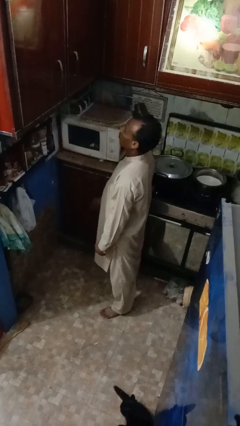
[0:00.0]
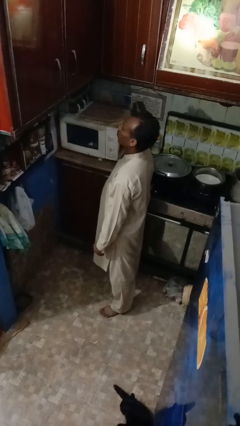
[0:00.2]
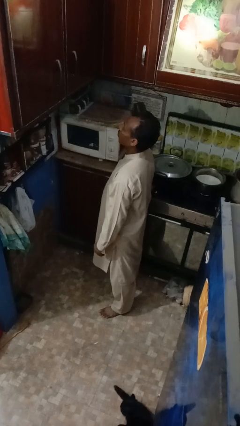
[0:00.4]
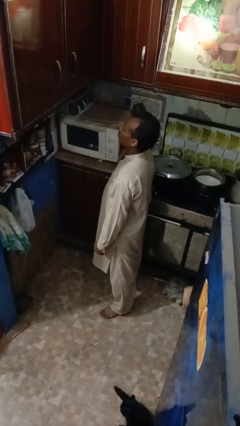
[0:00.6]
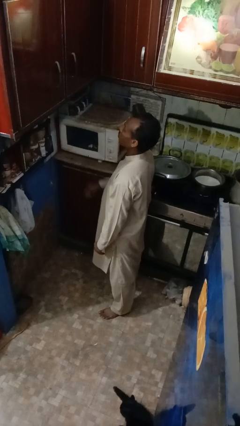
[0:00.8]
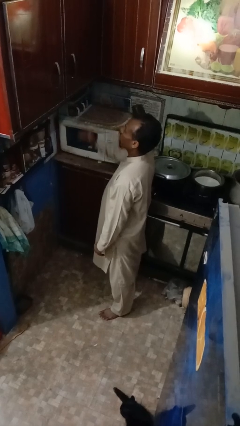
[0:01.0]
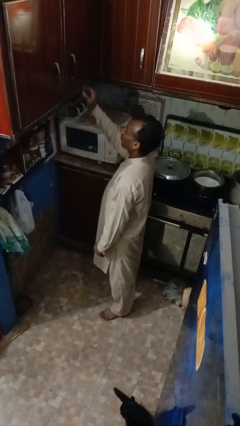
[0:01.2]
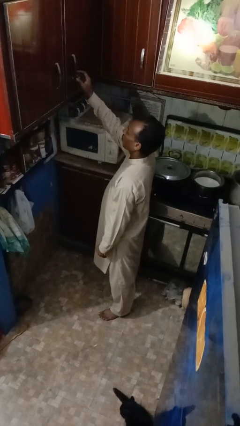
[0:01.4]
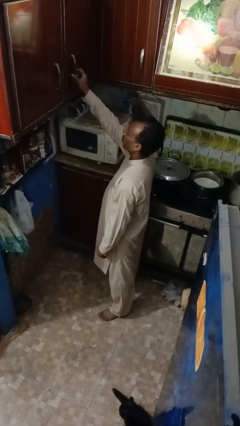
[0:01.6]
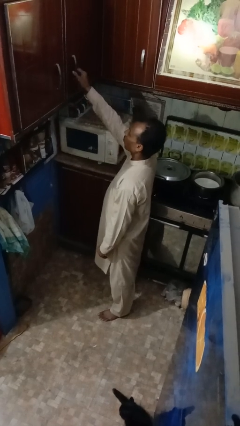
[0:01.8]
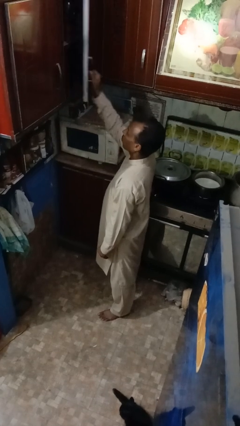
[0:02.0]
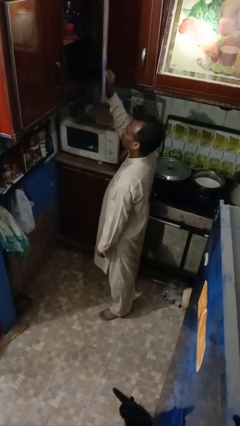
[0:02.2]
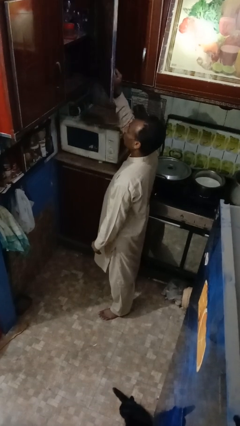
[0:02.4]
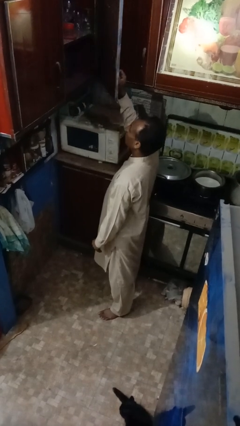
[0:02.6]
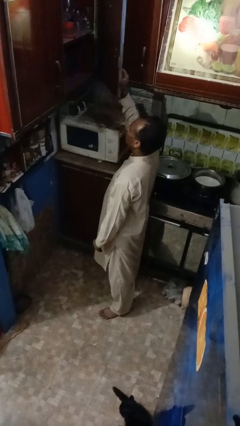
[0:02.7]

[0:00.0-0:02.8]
person opens cabinet

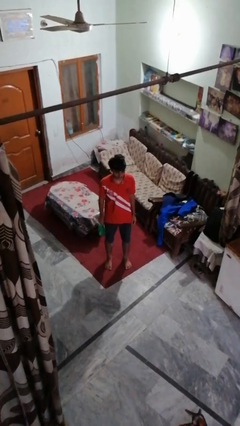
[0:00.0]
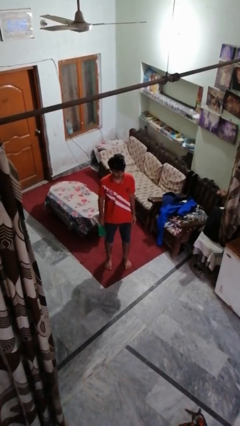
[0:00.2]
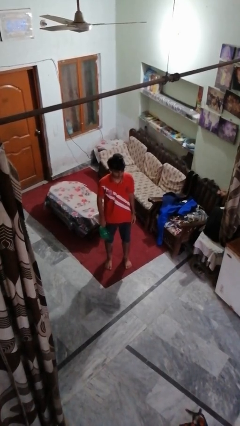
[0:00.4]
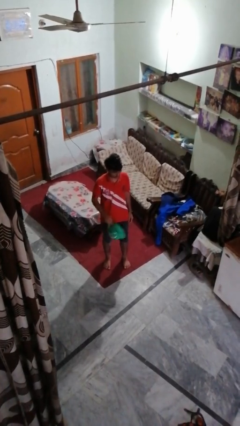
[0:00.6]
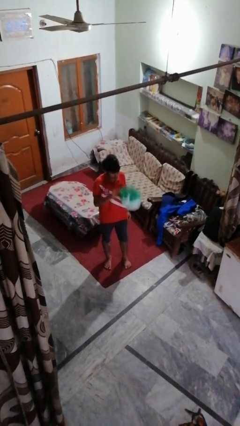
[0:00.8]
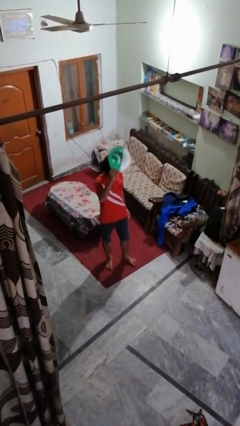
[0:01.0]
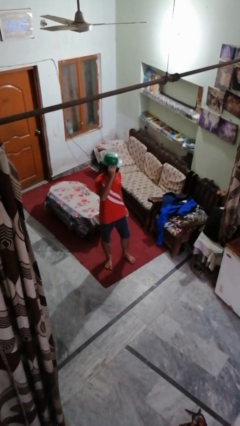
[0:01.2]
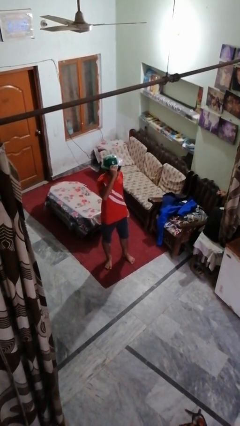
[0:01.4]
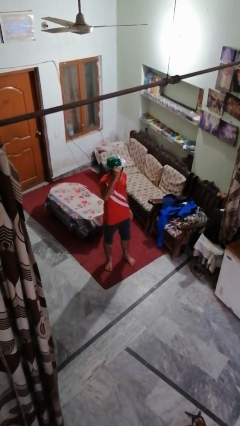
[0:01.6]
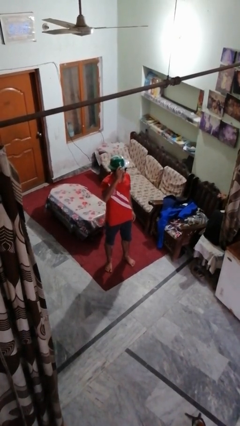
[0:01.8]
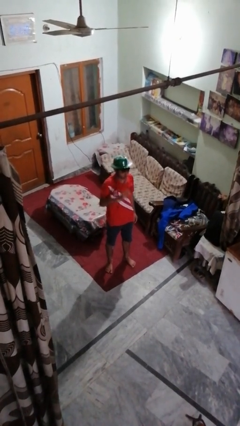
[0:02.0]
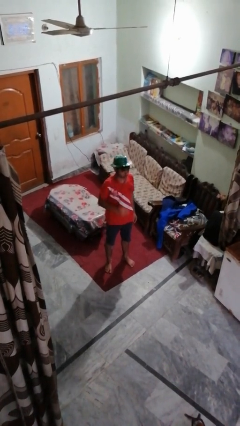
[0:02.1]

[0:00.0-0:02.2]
person puts on hat

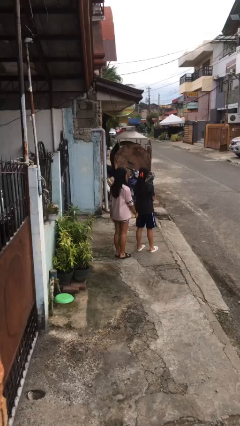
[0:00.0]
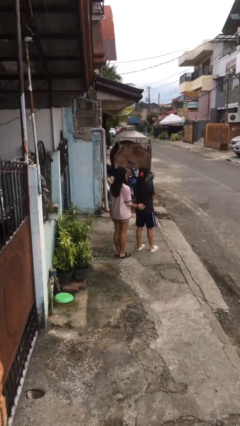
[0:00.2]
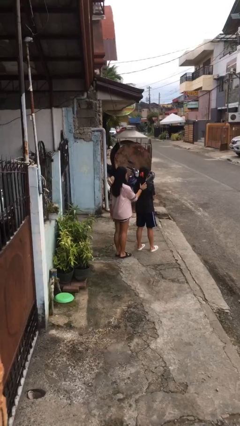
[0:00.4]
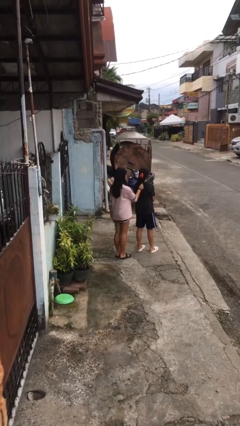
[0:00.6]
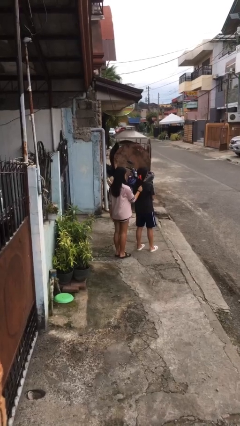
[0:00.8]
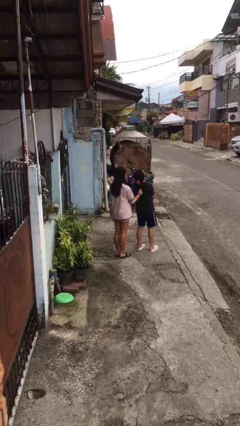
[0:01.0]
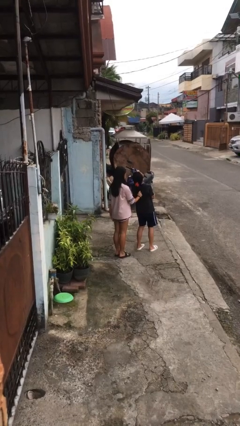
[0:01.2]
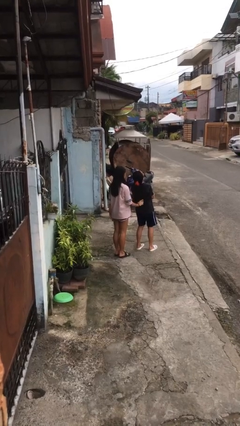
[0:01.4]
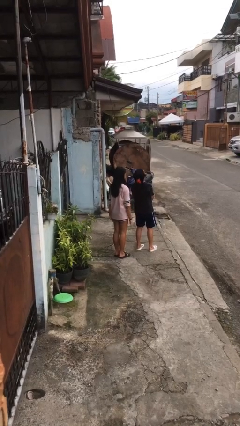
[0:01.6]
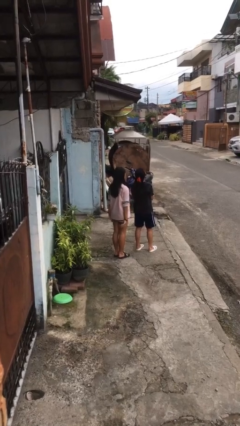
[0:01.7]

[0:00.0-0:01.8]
person grabs person by hair

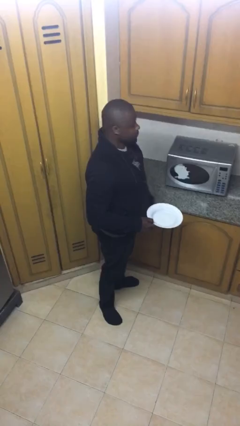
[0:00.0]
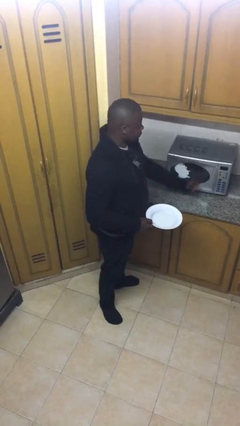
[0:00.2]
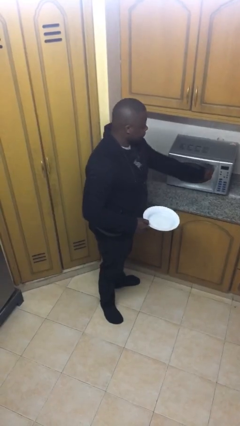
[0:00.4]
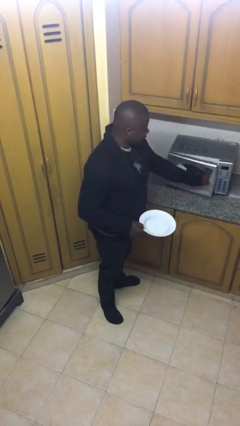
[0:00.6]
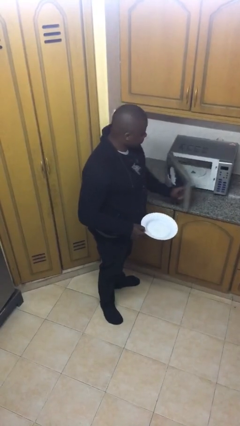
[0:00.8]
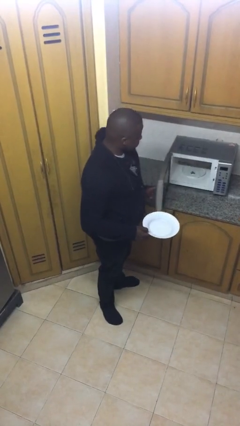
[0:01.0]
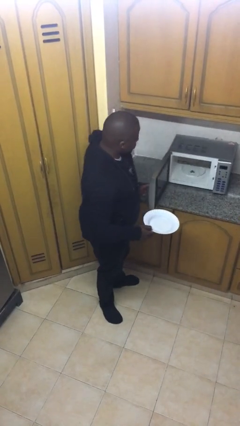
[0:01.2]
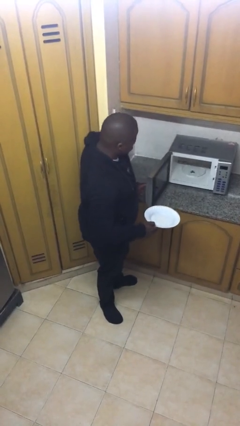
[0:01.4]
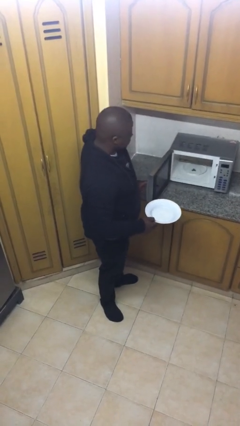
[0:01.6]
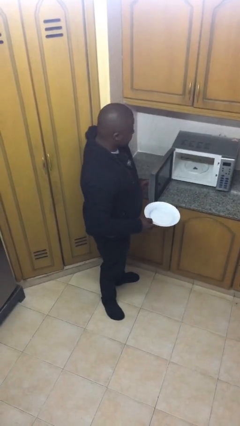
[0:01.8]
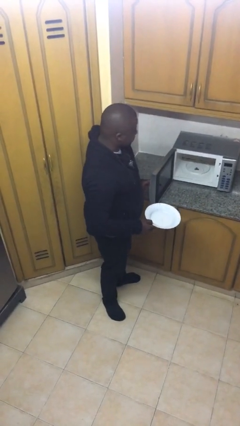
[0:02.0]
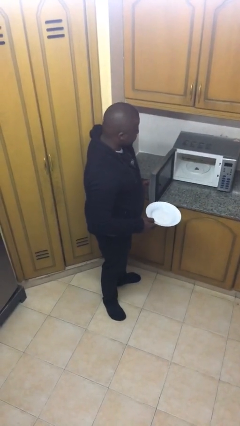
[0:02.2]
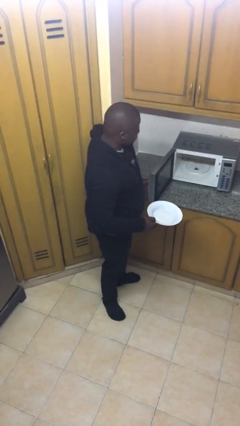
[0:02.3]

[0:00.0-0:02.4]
person opens microwave

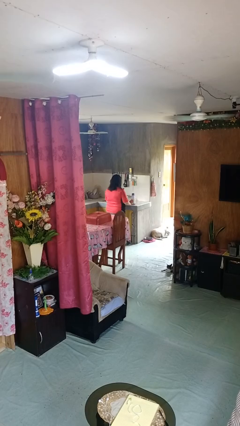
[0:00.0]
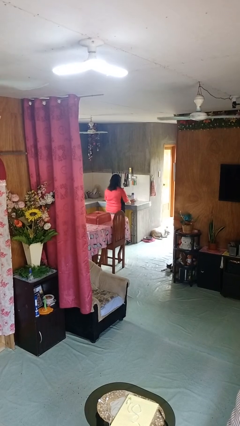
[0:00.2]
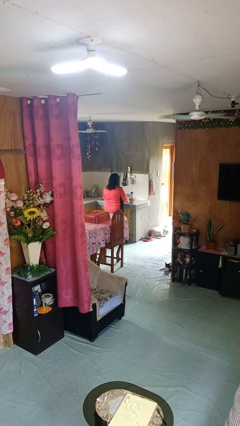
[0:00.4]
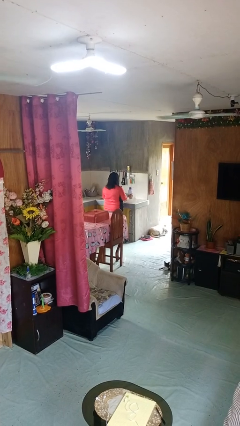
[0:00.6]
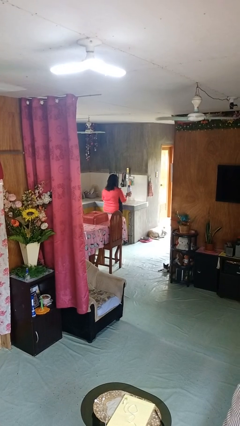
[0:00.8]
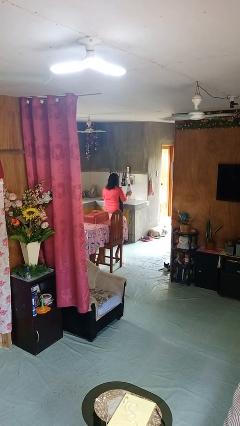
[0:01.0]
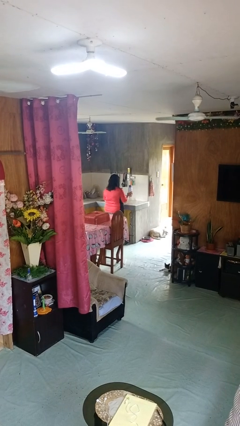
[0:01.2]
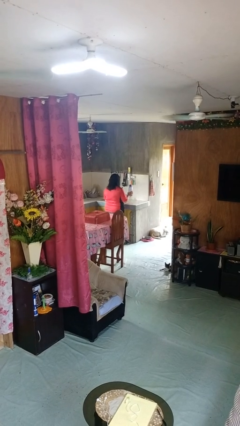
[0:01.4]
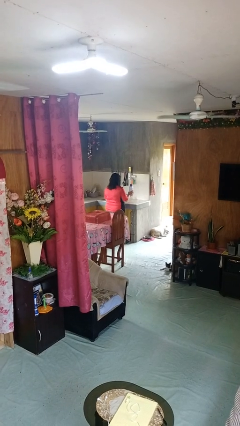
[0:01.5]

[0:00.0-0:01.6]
person picks up object from countertop

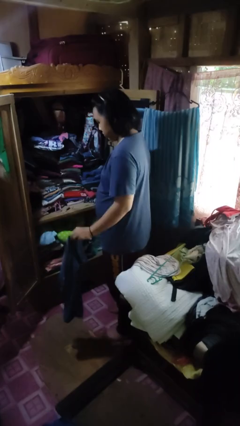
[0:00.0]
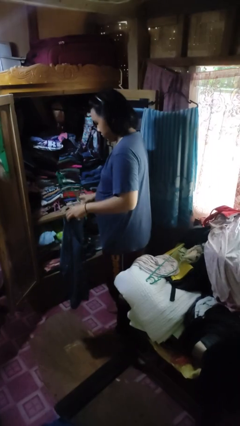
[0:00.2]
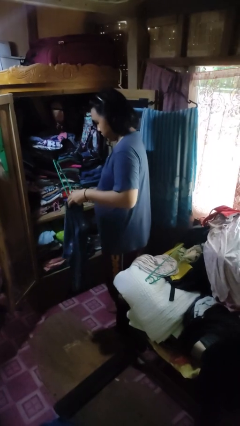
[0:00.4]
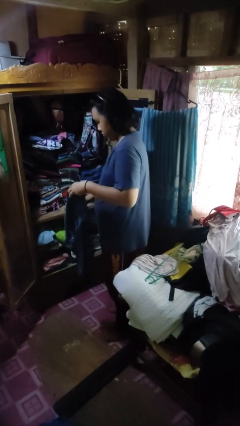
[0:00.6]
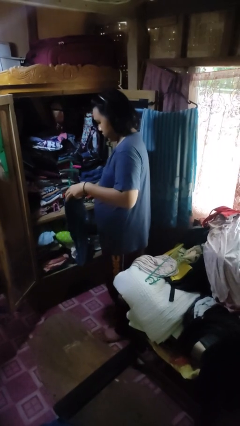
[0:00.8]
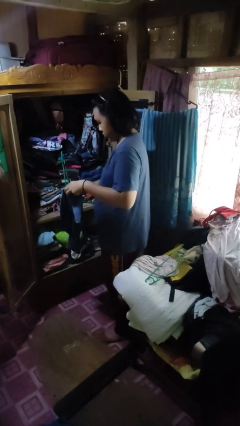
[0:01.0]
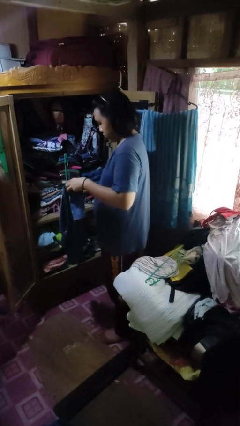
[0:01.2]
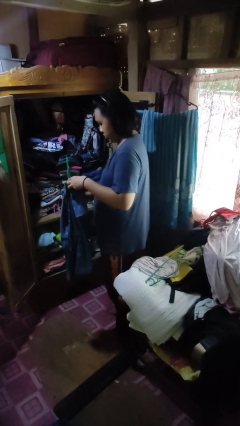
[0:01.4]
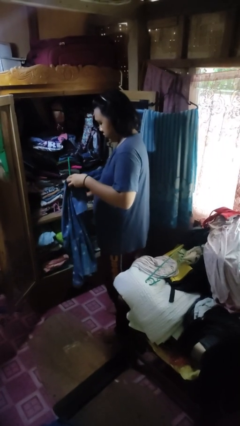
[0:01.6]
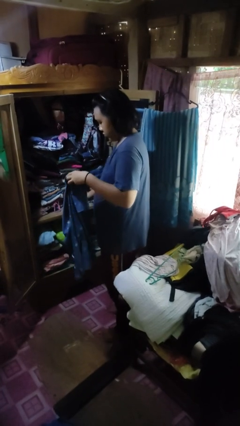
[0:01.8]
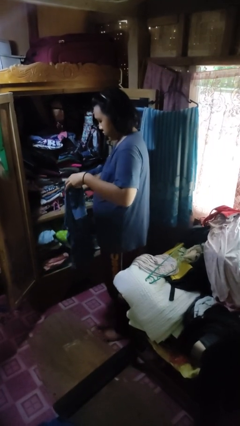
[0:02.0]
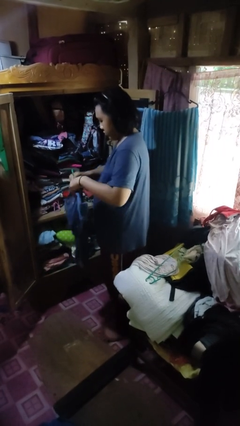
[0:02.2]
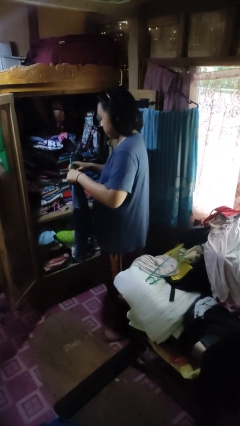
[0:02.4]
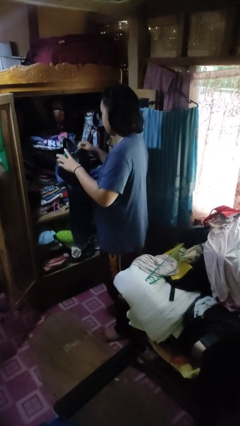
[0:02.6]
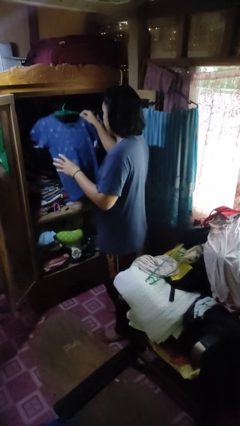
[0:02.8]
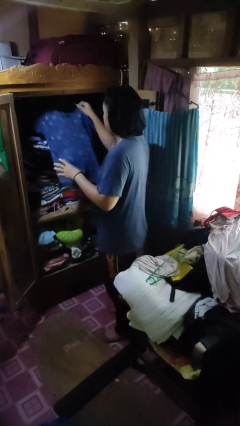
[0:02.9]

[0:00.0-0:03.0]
person puts clothes into closet

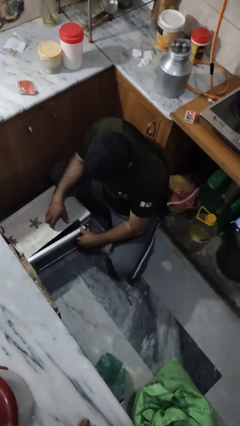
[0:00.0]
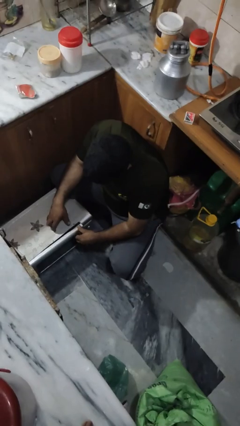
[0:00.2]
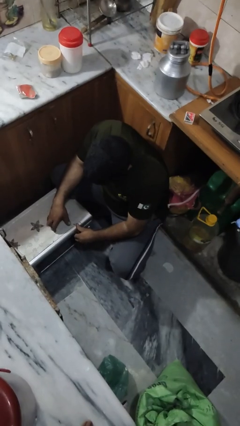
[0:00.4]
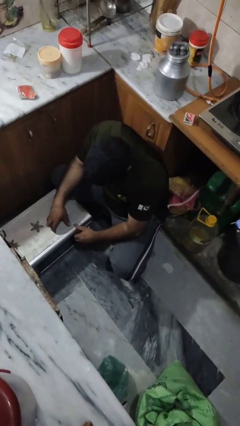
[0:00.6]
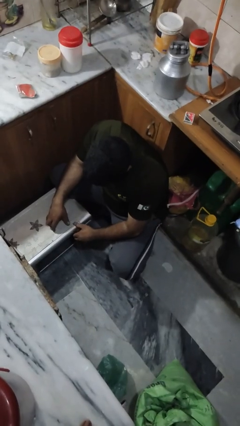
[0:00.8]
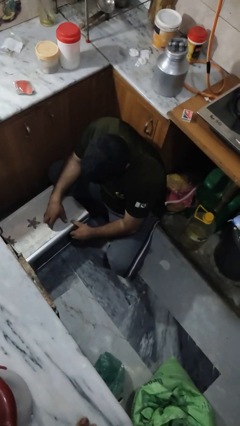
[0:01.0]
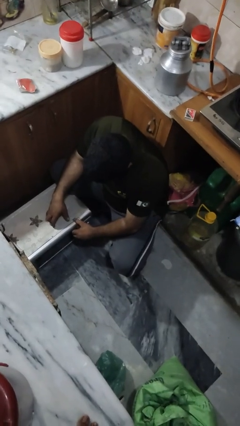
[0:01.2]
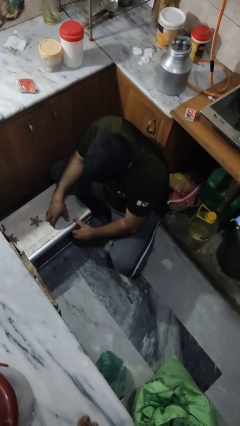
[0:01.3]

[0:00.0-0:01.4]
person closes oven door

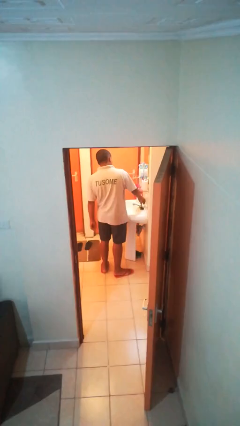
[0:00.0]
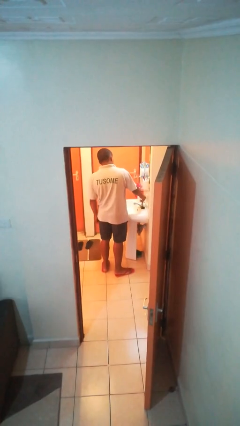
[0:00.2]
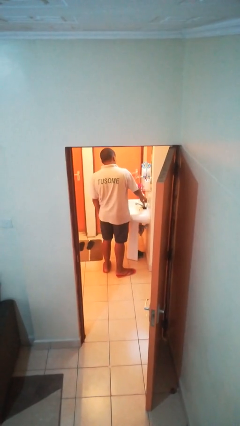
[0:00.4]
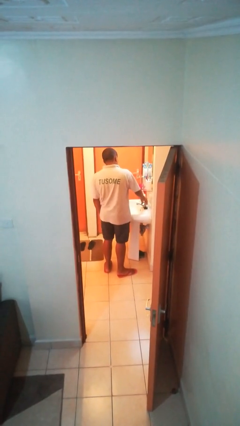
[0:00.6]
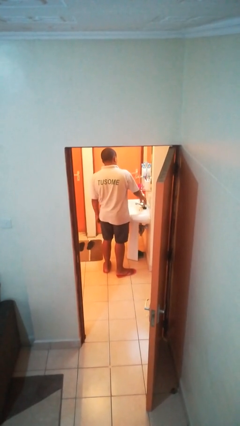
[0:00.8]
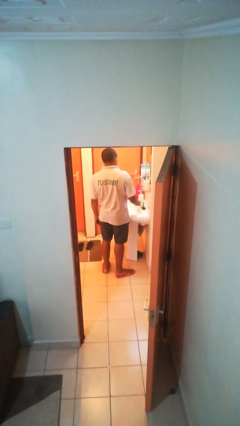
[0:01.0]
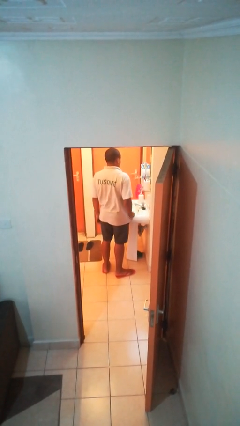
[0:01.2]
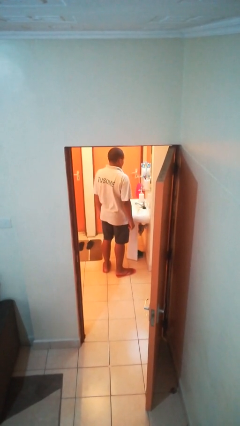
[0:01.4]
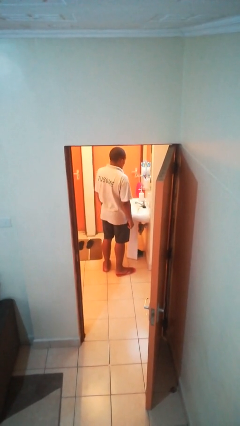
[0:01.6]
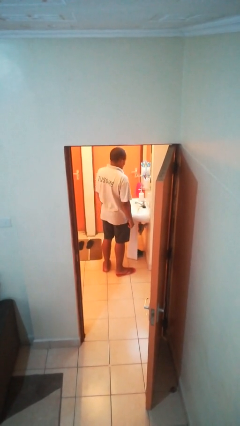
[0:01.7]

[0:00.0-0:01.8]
person turns off faucet

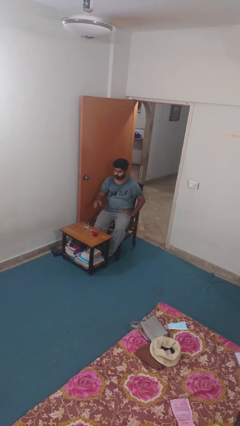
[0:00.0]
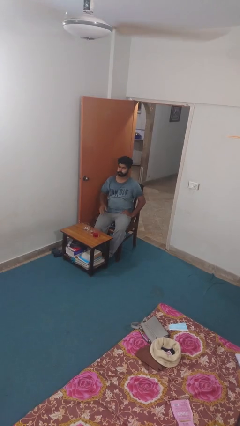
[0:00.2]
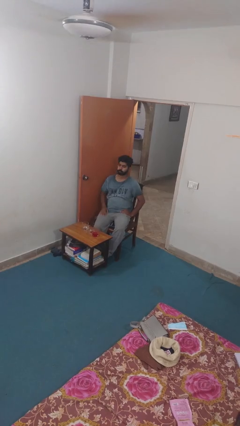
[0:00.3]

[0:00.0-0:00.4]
person puts down object on table
